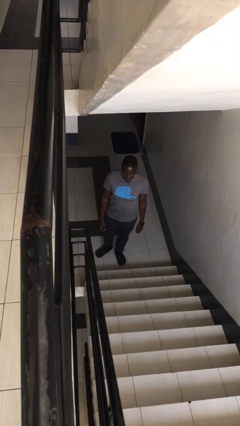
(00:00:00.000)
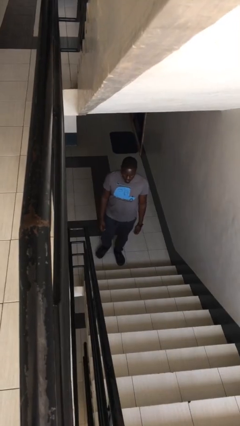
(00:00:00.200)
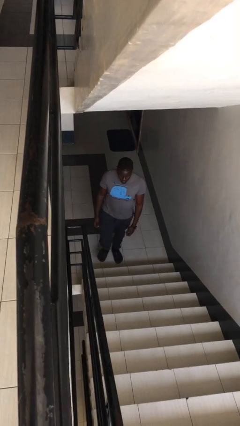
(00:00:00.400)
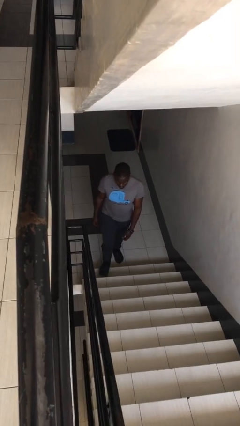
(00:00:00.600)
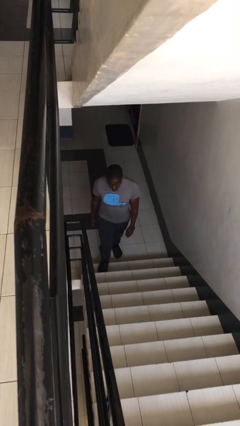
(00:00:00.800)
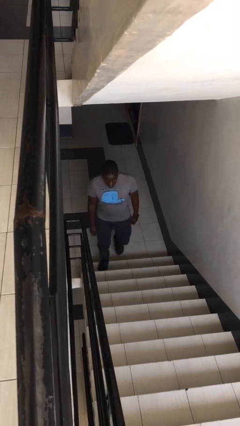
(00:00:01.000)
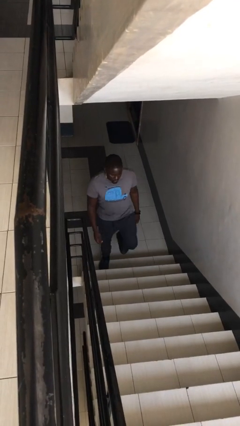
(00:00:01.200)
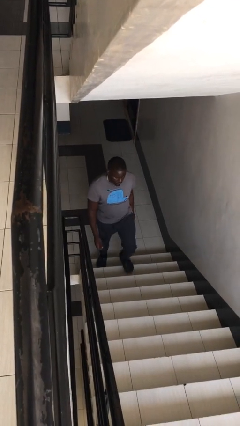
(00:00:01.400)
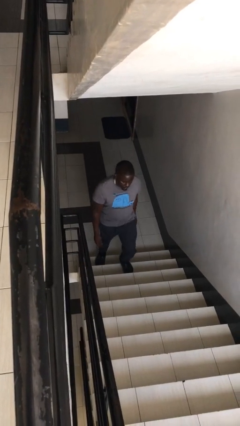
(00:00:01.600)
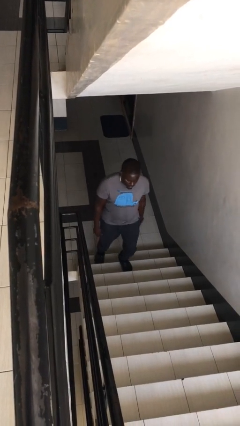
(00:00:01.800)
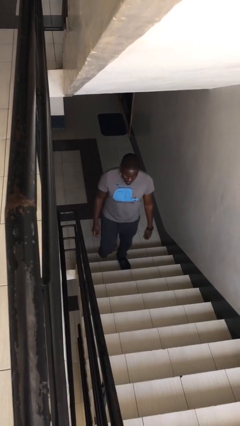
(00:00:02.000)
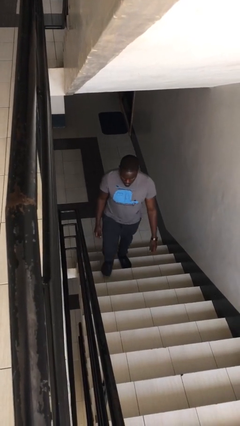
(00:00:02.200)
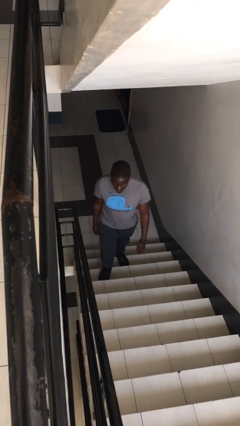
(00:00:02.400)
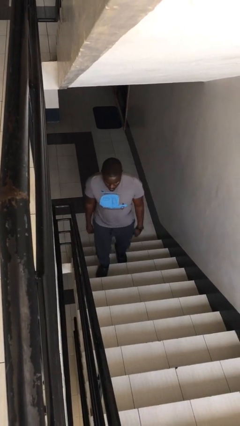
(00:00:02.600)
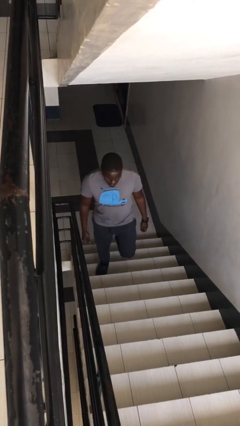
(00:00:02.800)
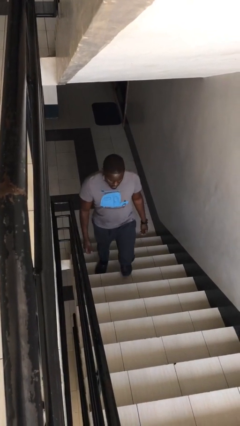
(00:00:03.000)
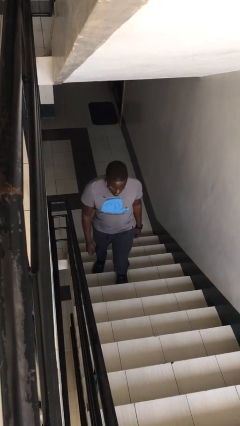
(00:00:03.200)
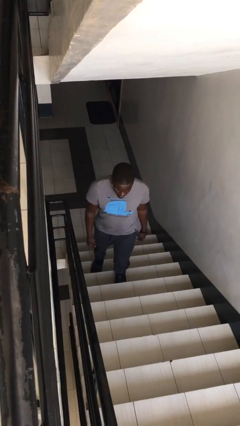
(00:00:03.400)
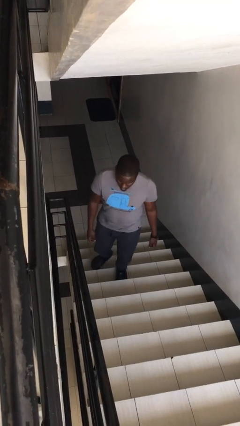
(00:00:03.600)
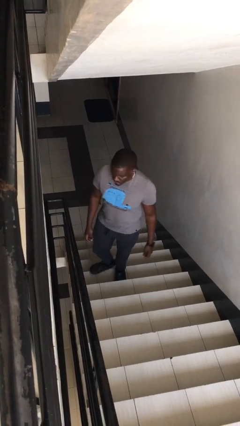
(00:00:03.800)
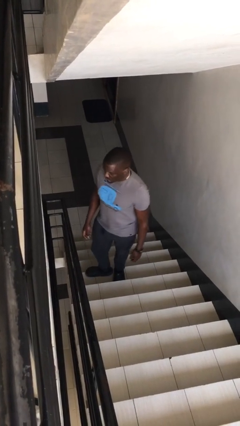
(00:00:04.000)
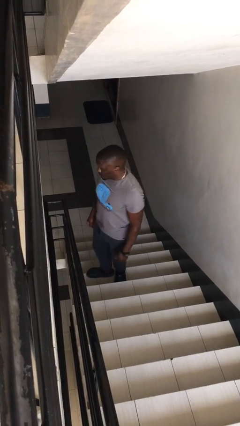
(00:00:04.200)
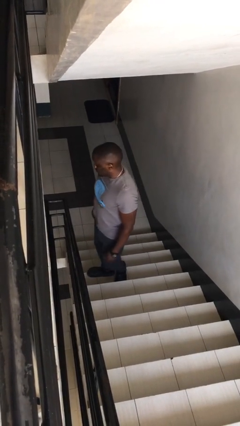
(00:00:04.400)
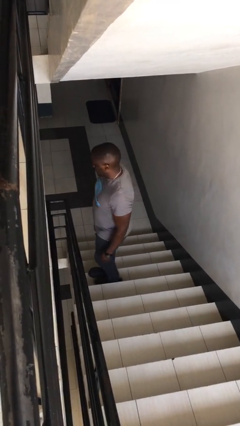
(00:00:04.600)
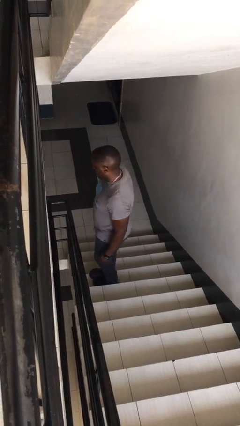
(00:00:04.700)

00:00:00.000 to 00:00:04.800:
person climbs up stairs

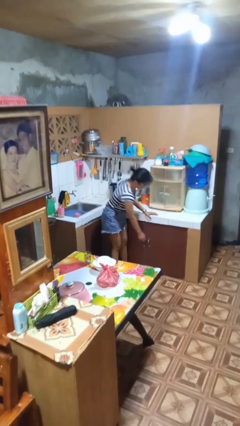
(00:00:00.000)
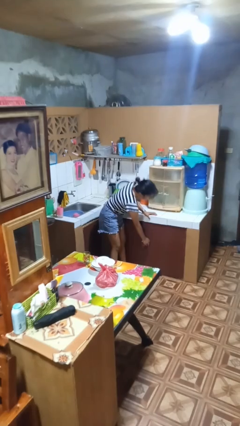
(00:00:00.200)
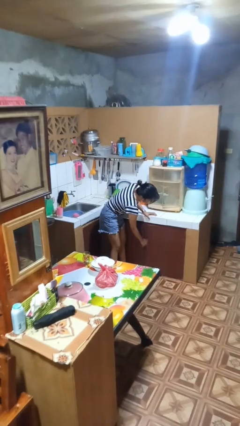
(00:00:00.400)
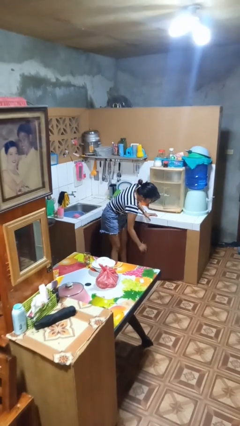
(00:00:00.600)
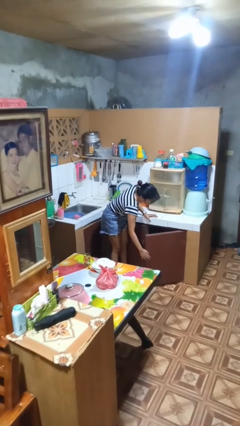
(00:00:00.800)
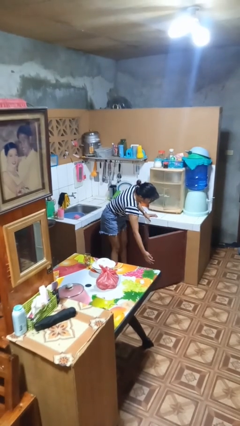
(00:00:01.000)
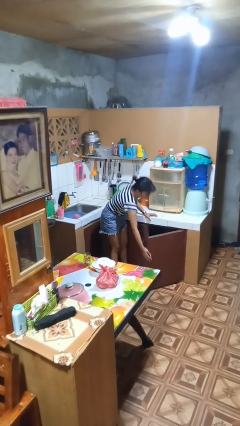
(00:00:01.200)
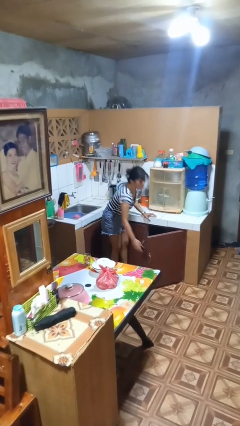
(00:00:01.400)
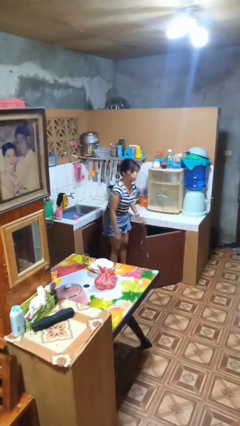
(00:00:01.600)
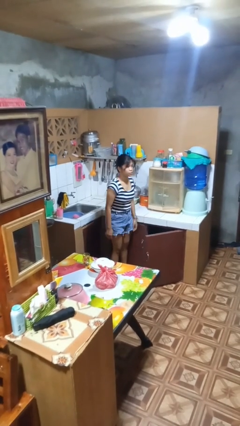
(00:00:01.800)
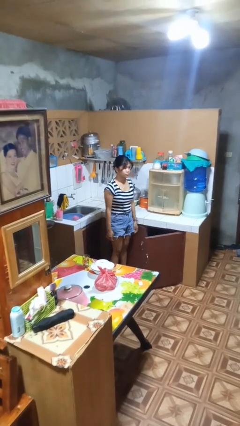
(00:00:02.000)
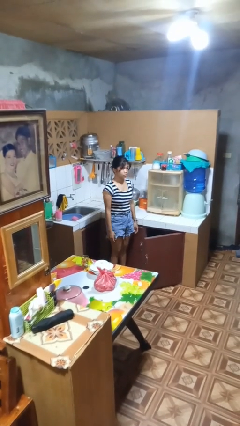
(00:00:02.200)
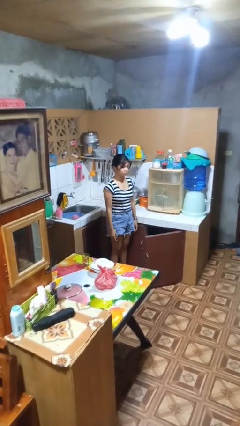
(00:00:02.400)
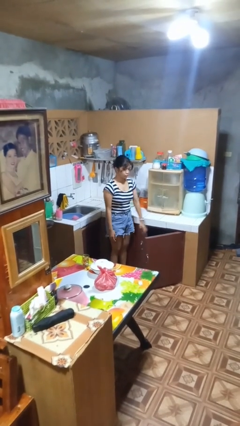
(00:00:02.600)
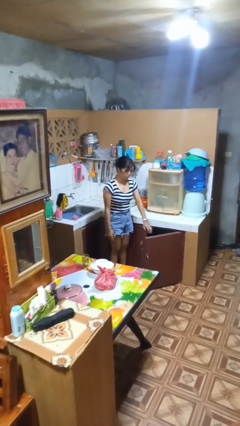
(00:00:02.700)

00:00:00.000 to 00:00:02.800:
person opens cabinet

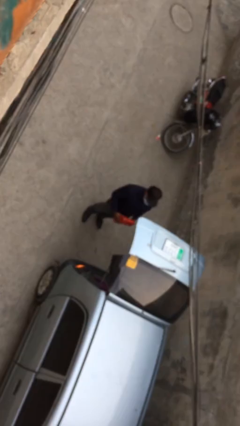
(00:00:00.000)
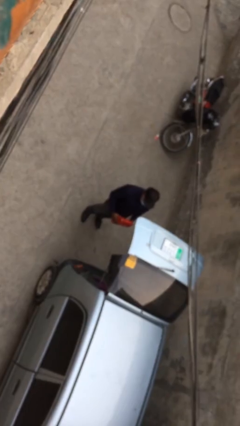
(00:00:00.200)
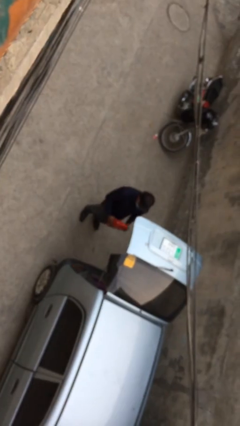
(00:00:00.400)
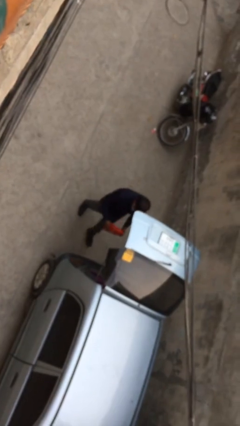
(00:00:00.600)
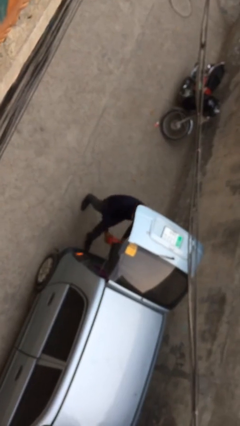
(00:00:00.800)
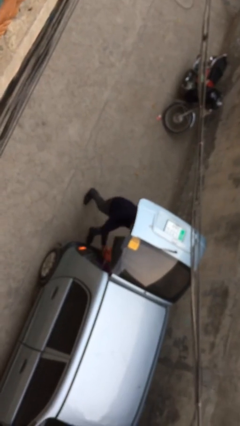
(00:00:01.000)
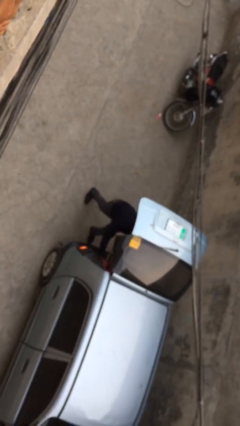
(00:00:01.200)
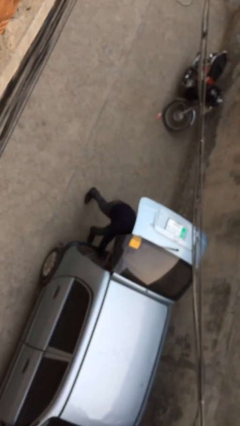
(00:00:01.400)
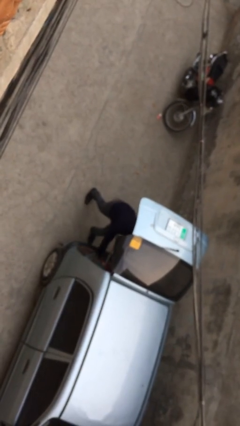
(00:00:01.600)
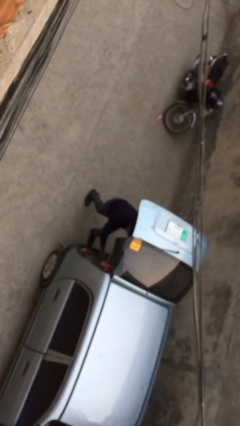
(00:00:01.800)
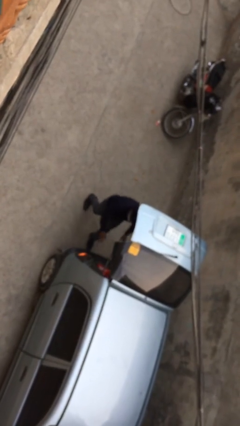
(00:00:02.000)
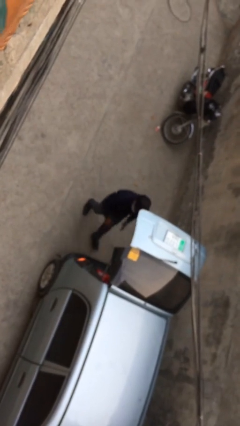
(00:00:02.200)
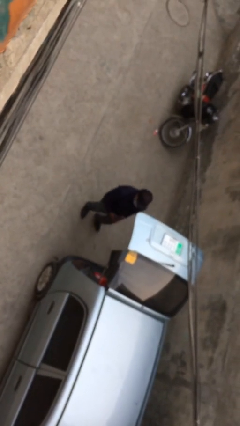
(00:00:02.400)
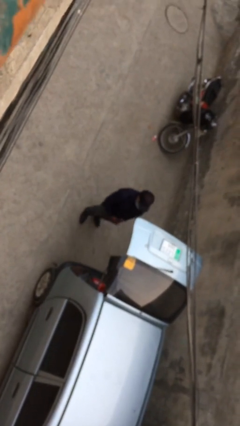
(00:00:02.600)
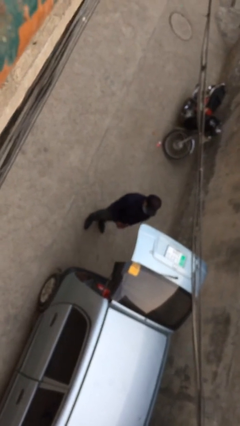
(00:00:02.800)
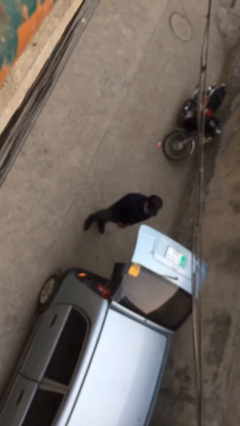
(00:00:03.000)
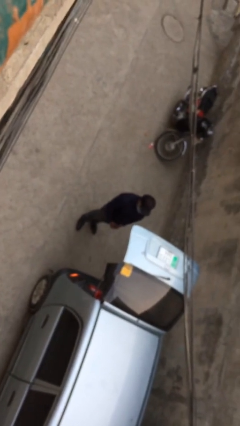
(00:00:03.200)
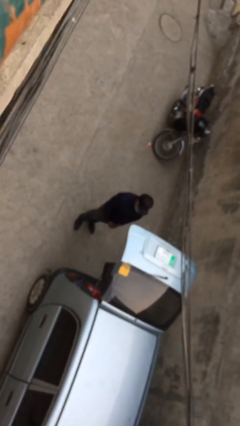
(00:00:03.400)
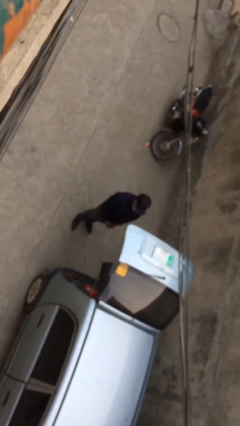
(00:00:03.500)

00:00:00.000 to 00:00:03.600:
person loads car

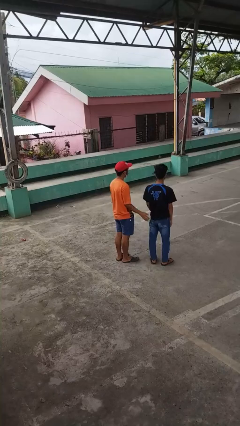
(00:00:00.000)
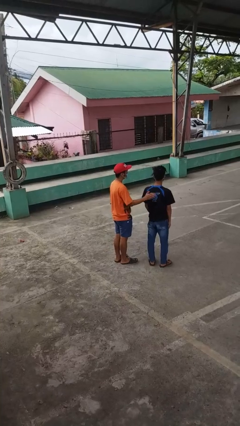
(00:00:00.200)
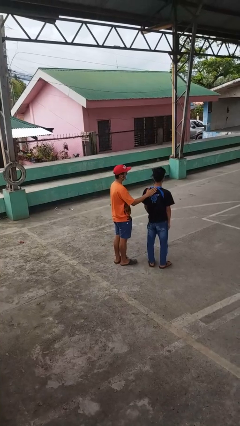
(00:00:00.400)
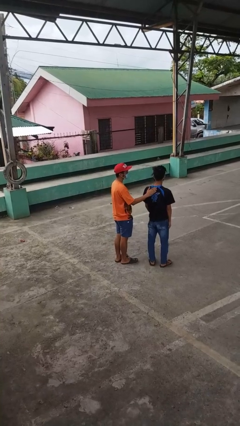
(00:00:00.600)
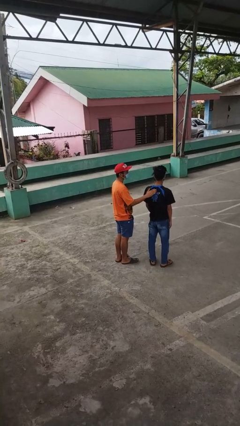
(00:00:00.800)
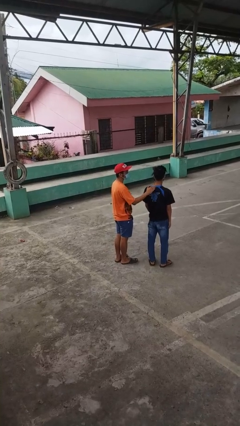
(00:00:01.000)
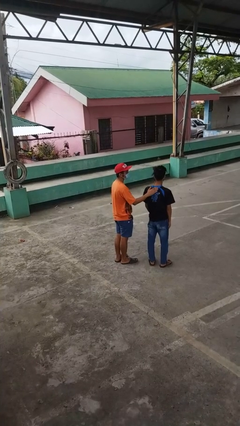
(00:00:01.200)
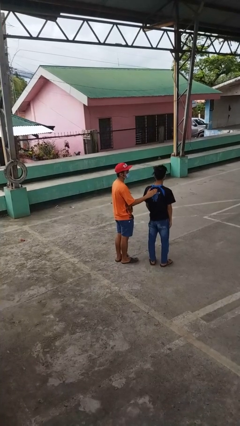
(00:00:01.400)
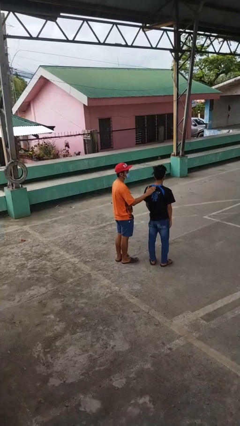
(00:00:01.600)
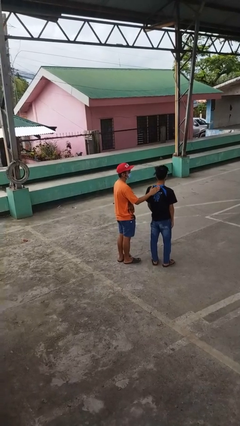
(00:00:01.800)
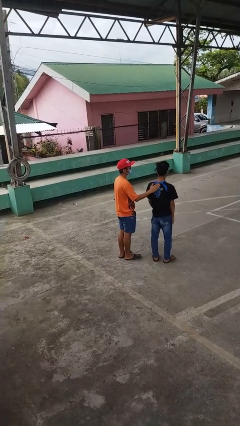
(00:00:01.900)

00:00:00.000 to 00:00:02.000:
person touches back of person

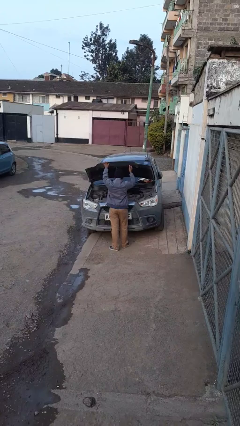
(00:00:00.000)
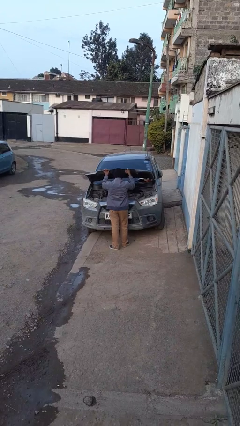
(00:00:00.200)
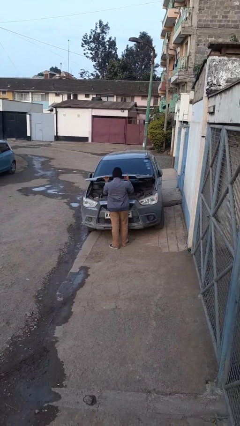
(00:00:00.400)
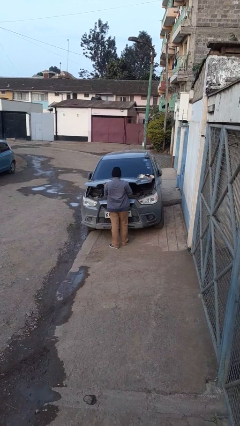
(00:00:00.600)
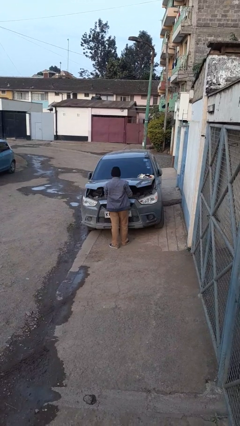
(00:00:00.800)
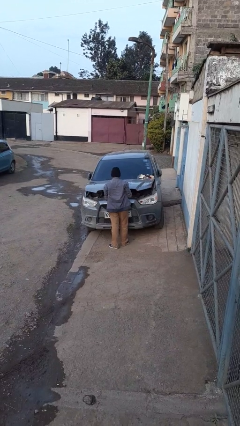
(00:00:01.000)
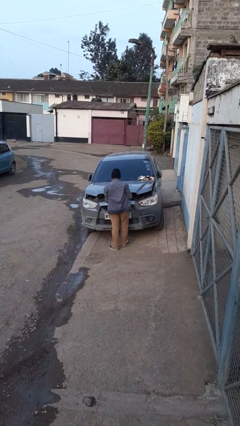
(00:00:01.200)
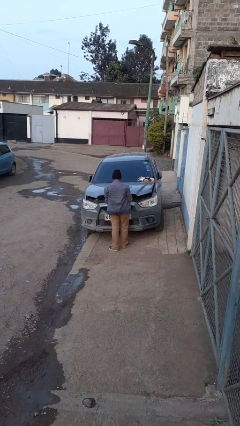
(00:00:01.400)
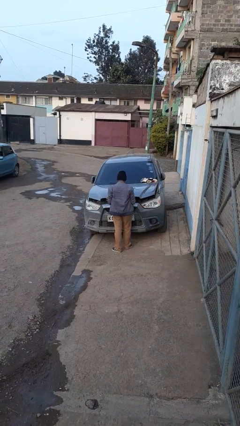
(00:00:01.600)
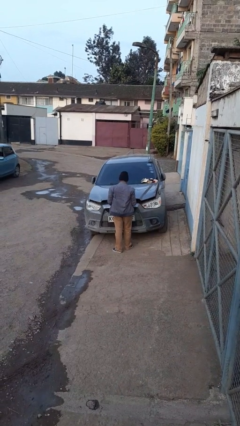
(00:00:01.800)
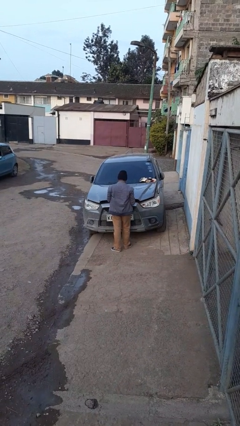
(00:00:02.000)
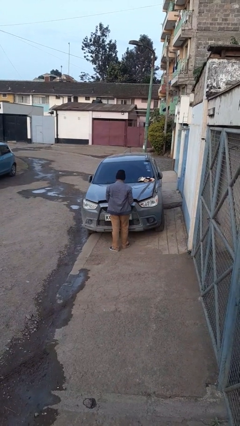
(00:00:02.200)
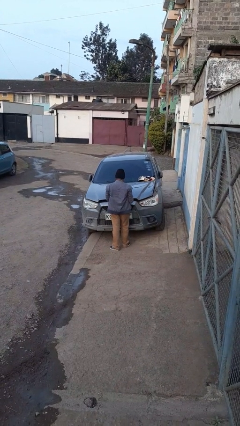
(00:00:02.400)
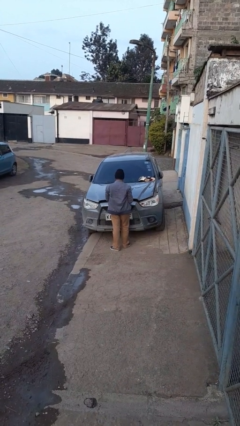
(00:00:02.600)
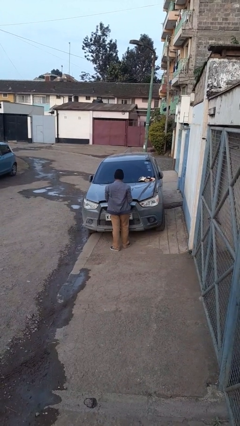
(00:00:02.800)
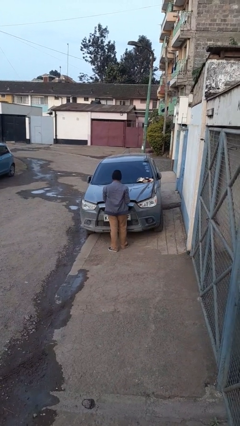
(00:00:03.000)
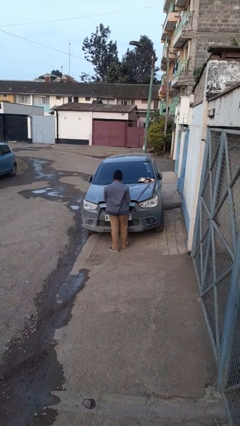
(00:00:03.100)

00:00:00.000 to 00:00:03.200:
person closes car hood

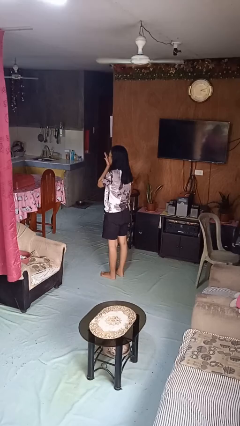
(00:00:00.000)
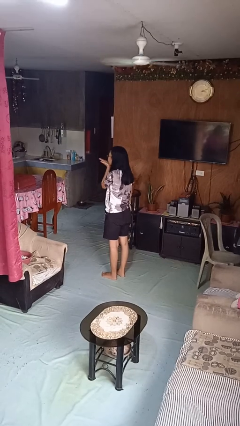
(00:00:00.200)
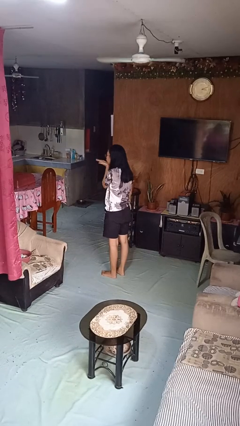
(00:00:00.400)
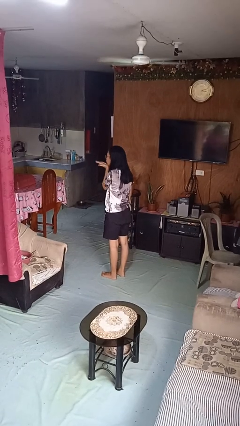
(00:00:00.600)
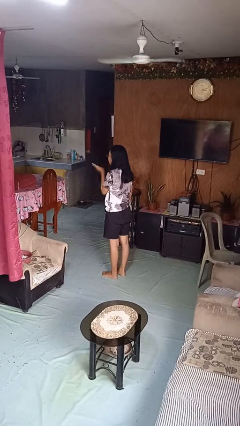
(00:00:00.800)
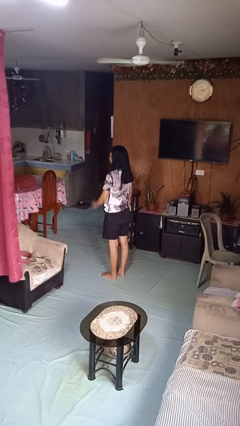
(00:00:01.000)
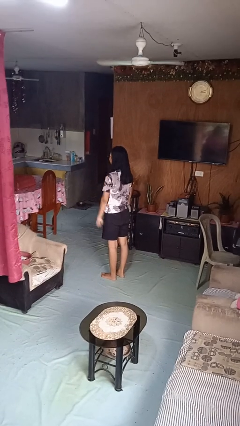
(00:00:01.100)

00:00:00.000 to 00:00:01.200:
person gestures blow kiss
